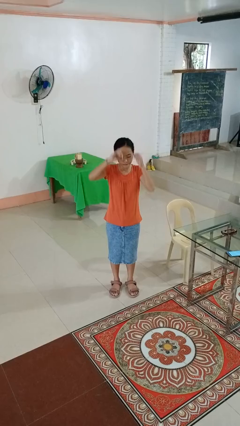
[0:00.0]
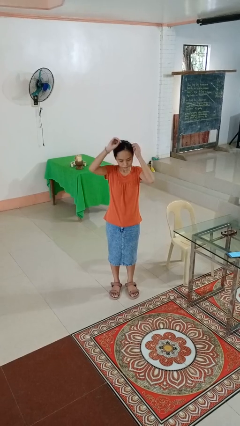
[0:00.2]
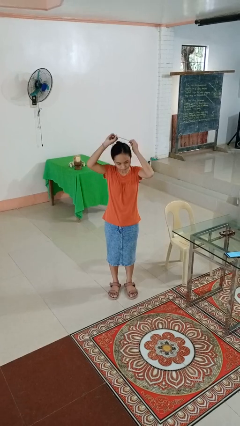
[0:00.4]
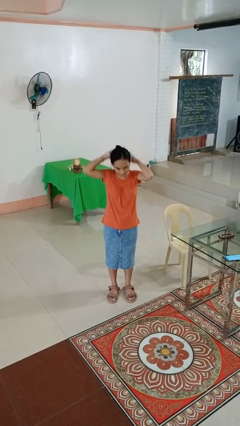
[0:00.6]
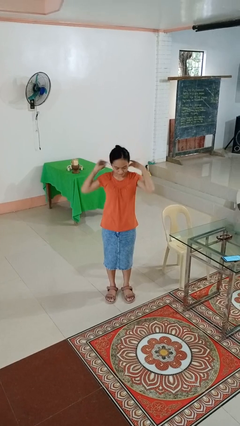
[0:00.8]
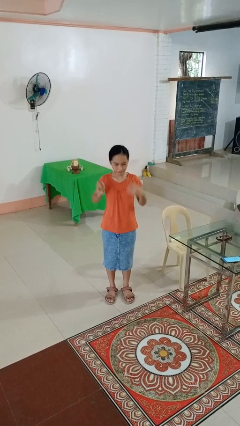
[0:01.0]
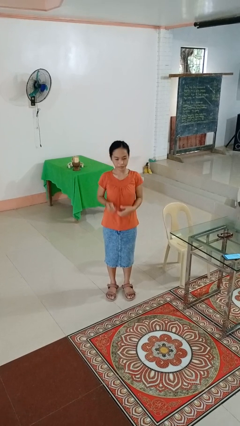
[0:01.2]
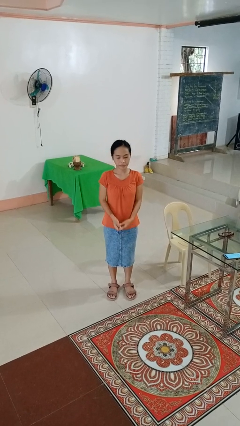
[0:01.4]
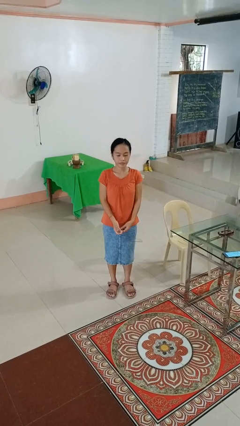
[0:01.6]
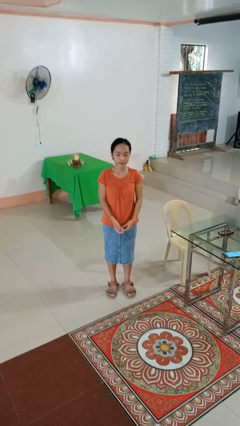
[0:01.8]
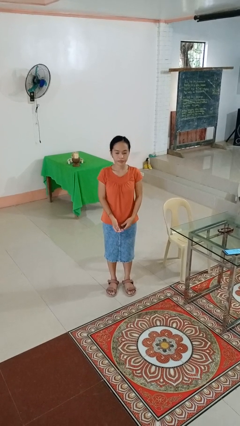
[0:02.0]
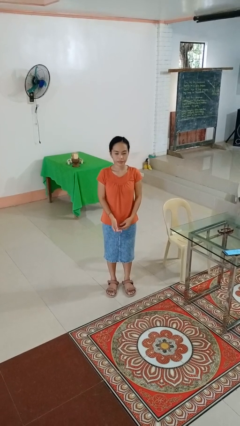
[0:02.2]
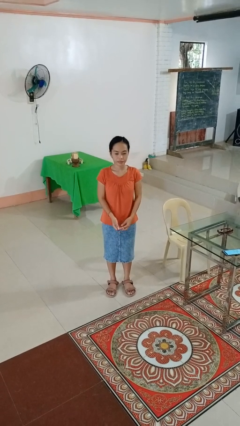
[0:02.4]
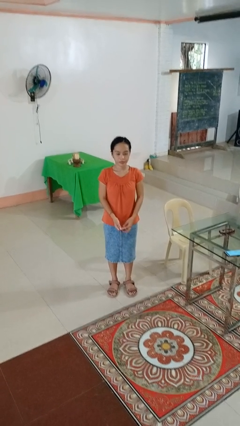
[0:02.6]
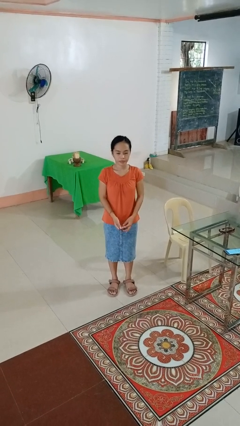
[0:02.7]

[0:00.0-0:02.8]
person takes off necklace

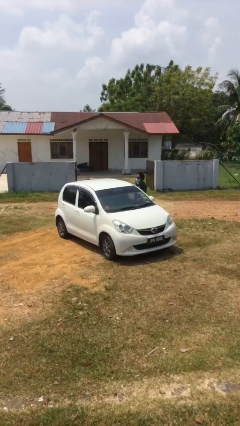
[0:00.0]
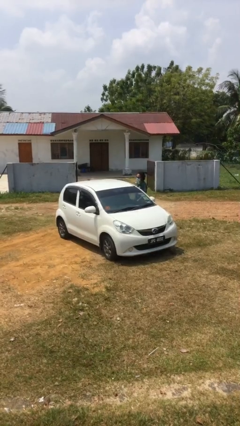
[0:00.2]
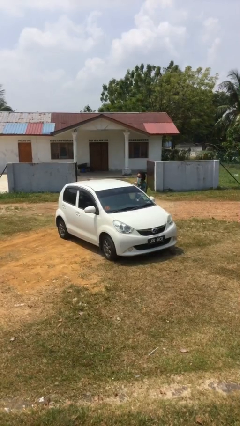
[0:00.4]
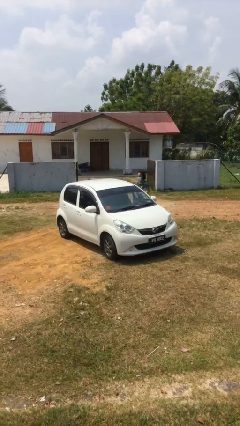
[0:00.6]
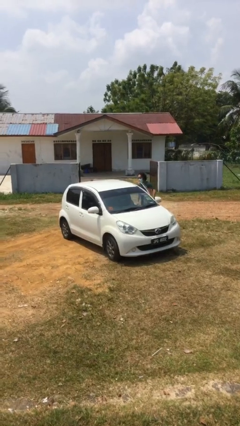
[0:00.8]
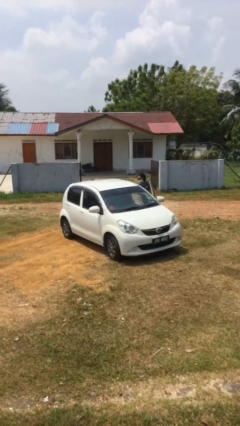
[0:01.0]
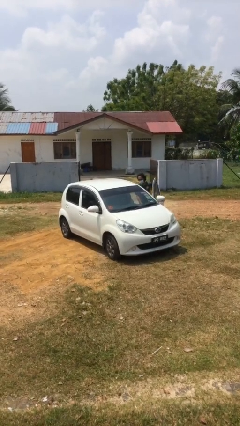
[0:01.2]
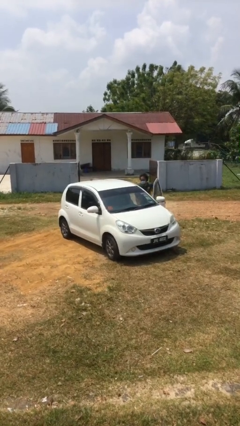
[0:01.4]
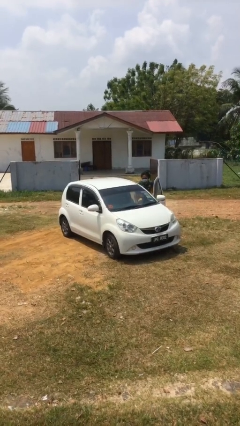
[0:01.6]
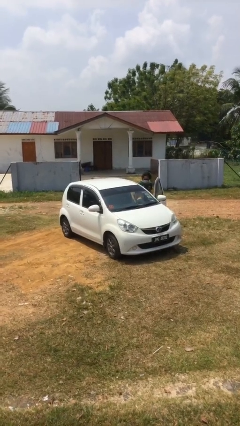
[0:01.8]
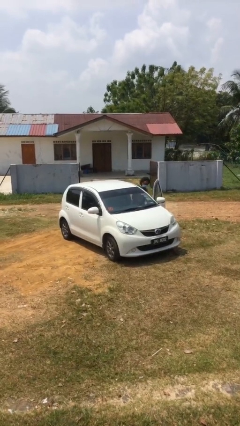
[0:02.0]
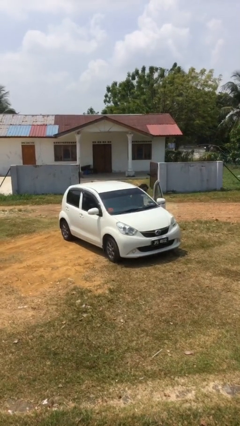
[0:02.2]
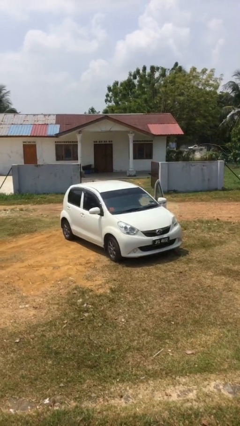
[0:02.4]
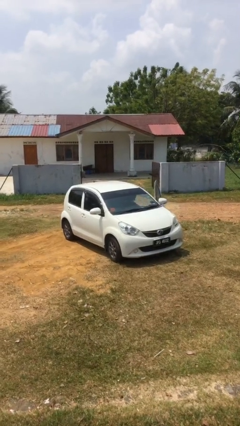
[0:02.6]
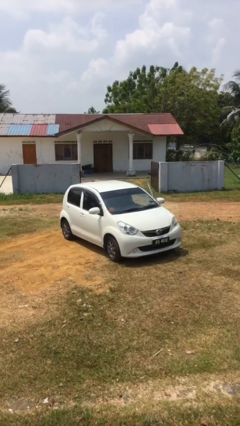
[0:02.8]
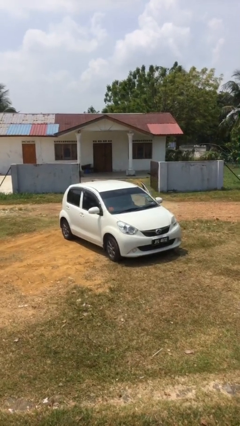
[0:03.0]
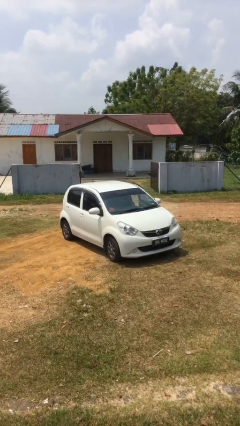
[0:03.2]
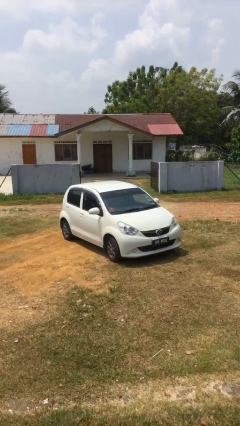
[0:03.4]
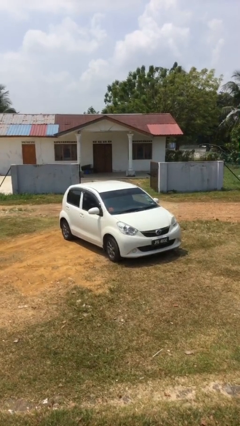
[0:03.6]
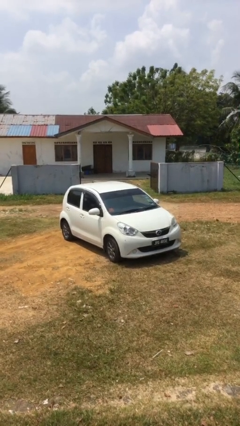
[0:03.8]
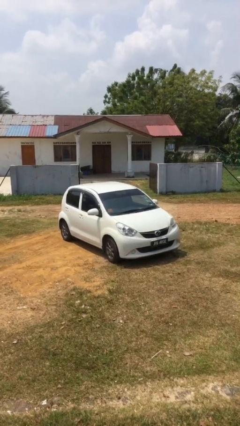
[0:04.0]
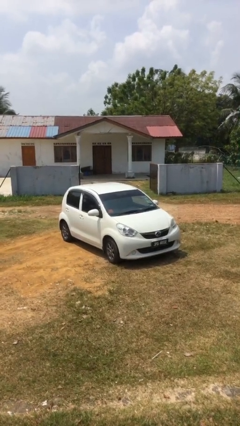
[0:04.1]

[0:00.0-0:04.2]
car picks up person

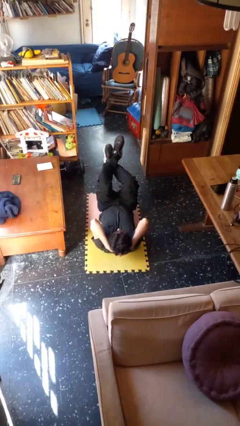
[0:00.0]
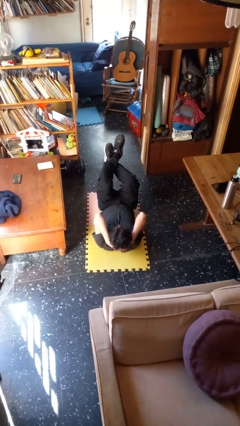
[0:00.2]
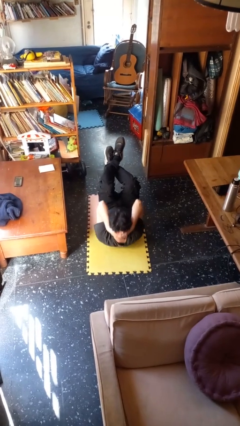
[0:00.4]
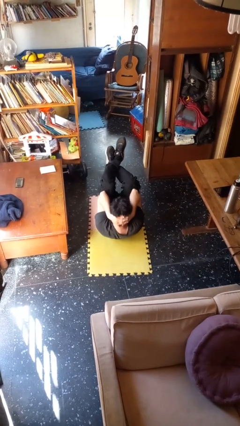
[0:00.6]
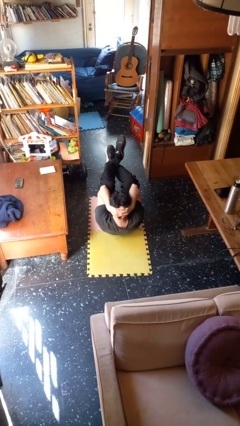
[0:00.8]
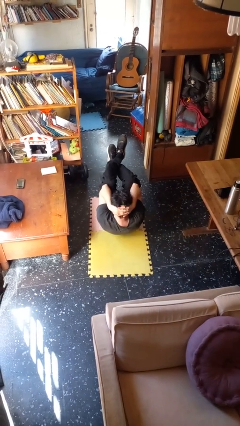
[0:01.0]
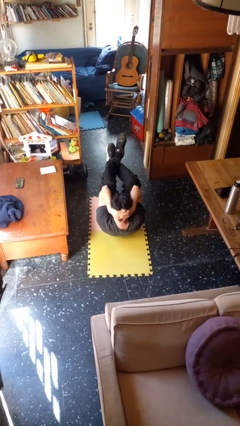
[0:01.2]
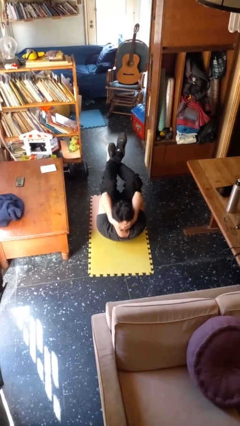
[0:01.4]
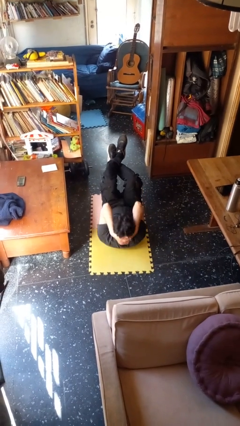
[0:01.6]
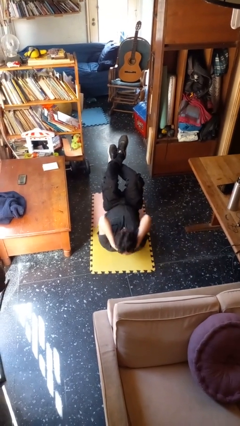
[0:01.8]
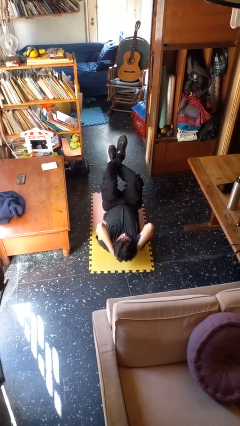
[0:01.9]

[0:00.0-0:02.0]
person exercises with situp

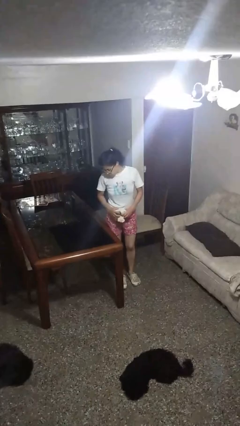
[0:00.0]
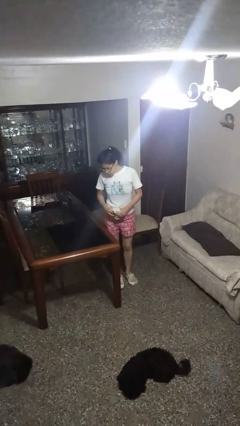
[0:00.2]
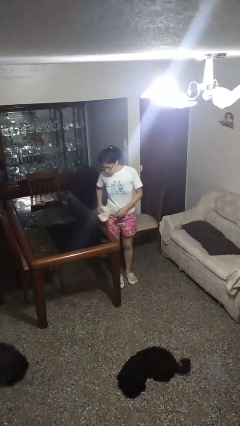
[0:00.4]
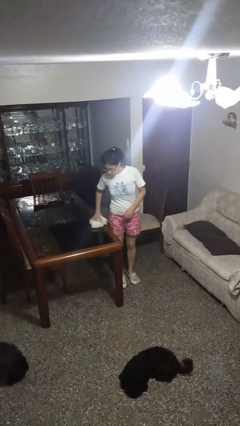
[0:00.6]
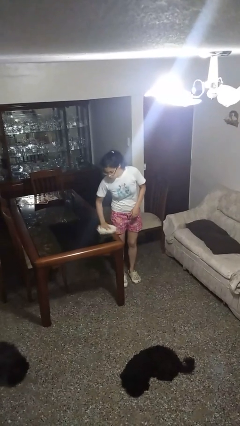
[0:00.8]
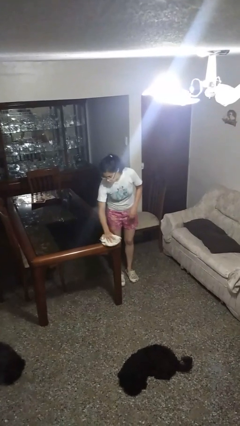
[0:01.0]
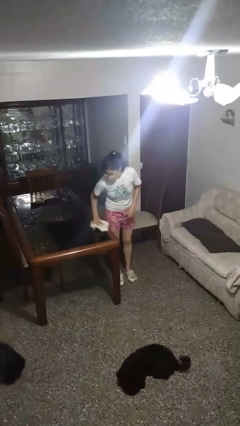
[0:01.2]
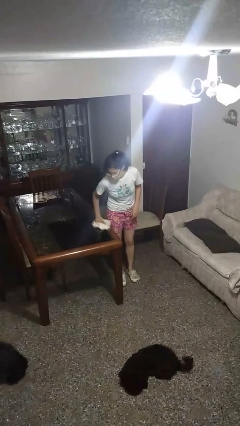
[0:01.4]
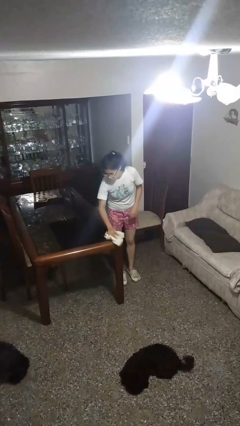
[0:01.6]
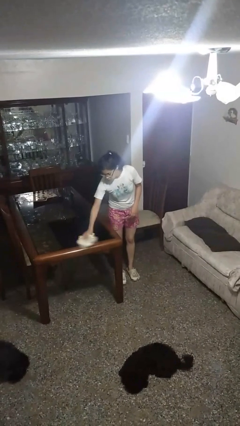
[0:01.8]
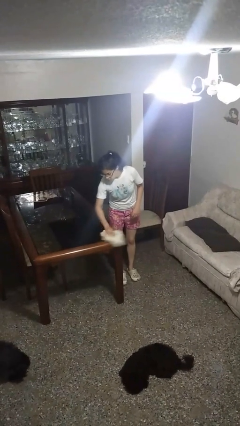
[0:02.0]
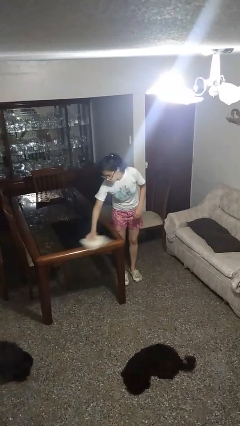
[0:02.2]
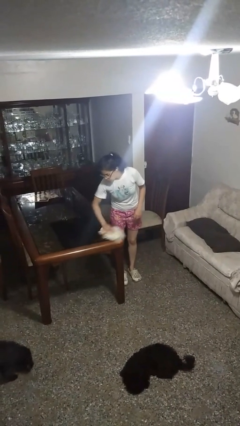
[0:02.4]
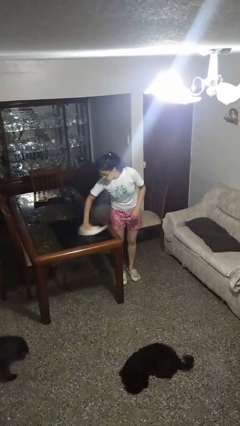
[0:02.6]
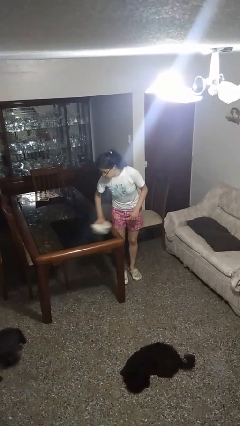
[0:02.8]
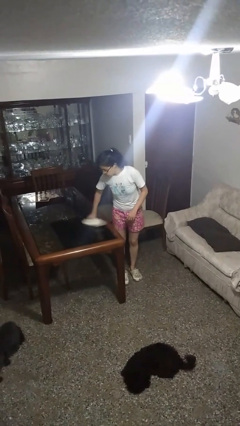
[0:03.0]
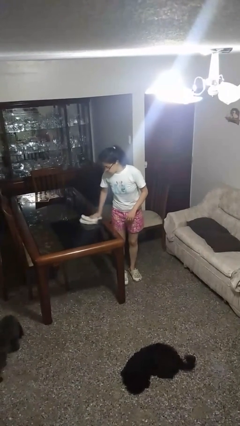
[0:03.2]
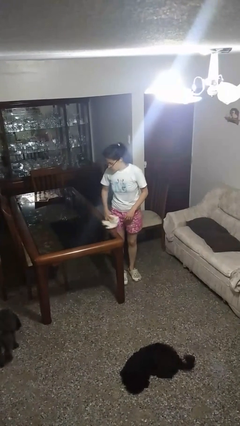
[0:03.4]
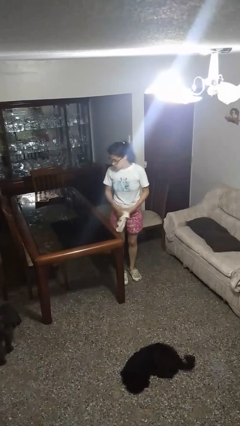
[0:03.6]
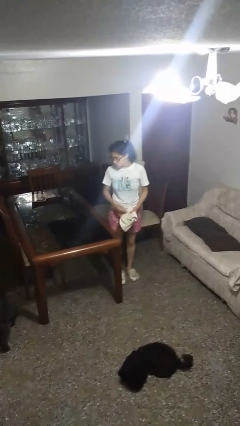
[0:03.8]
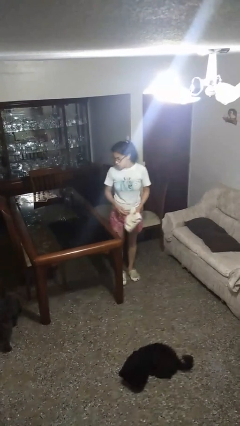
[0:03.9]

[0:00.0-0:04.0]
person cleans table with rag

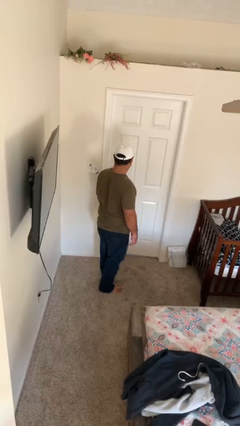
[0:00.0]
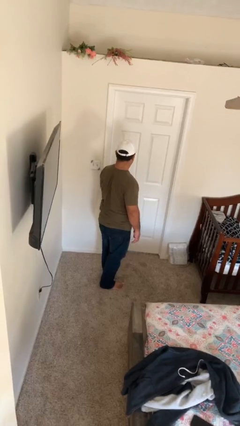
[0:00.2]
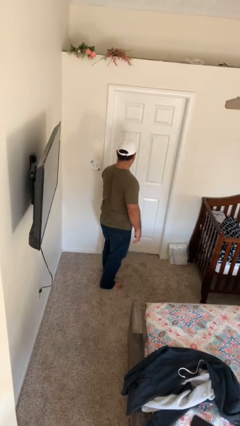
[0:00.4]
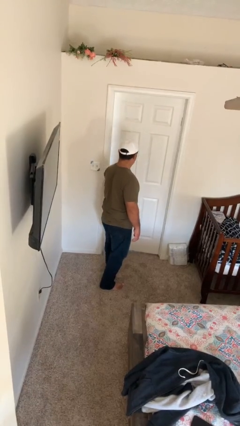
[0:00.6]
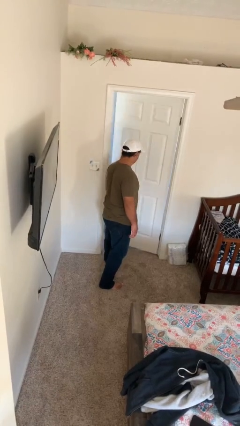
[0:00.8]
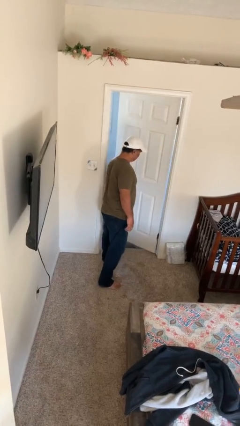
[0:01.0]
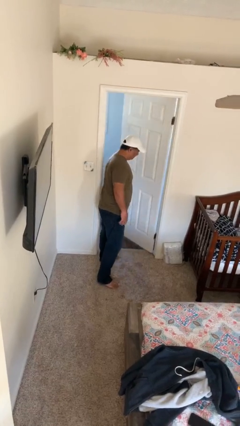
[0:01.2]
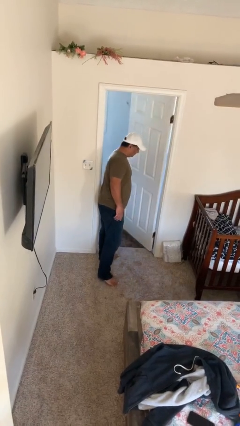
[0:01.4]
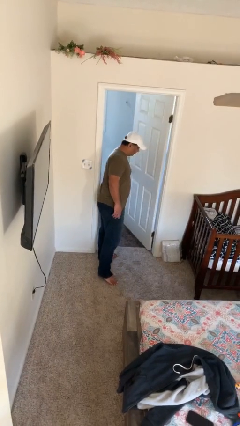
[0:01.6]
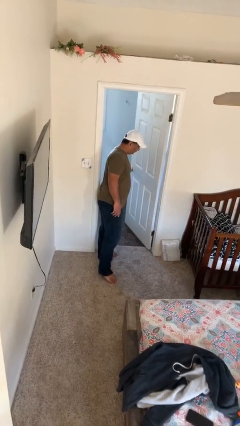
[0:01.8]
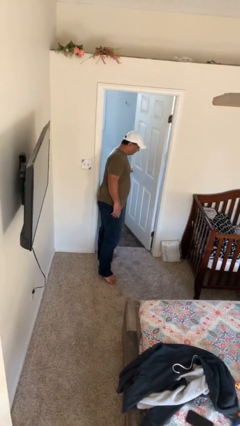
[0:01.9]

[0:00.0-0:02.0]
person opens facility door

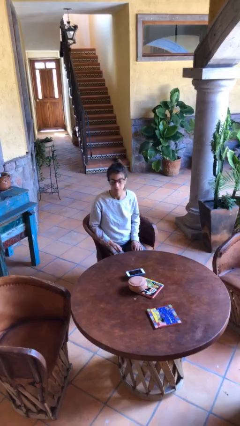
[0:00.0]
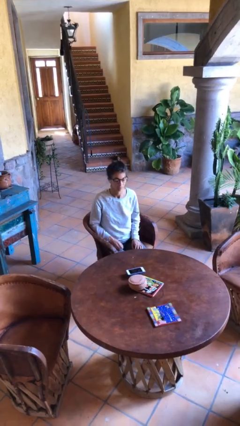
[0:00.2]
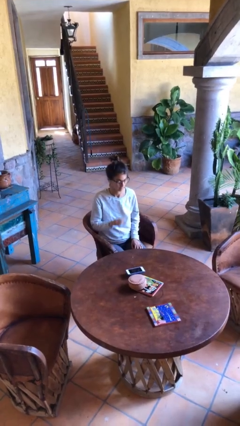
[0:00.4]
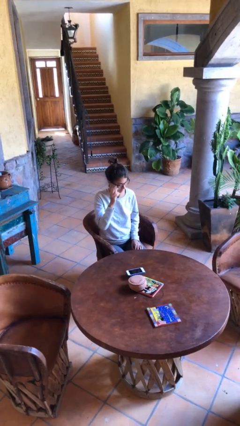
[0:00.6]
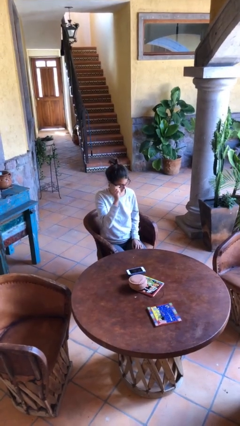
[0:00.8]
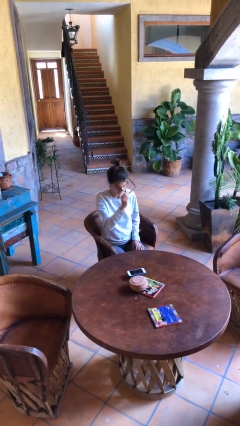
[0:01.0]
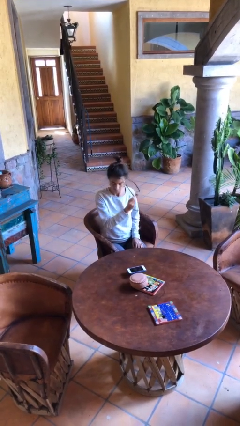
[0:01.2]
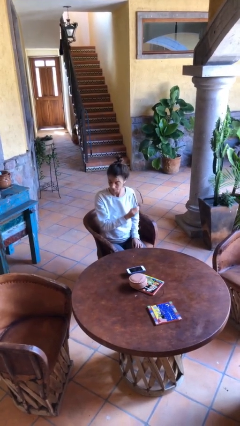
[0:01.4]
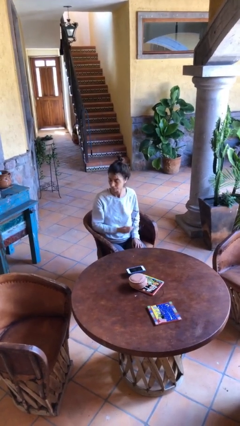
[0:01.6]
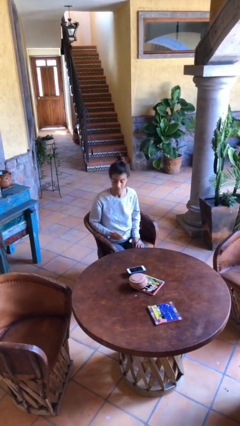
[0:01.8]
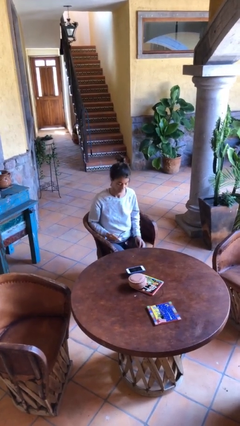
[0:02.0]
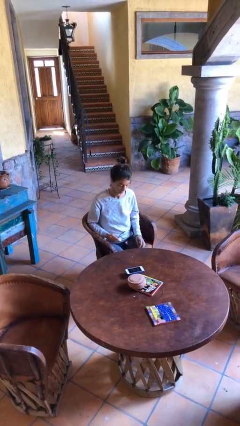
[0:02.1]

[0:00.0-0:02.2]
person takes off glasses

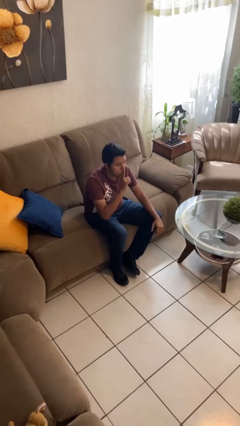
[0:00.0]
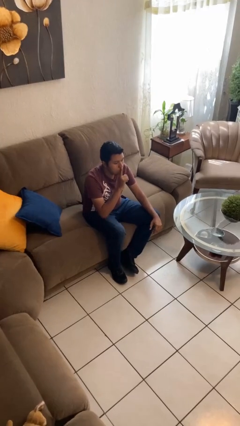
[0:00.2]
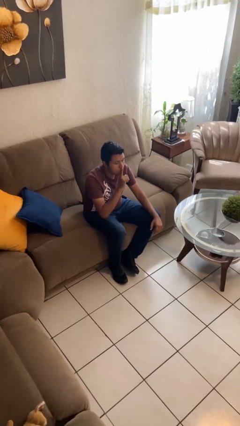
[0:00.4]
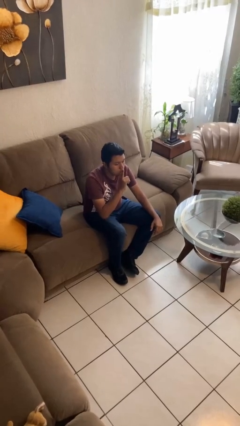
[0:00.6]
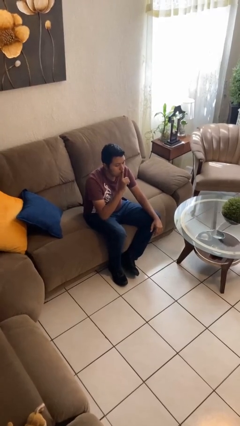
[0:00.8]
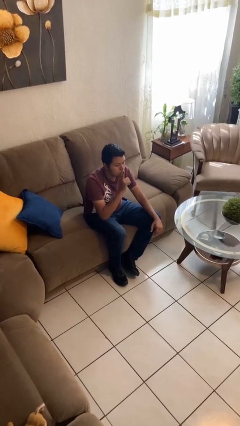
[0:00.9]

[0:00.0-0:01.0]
person gestures be quiet
